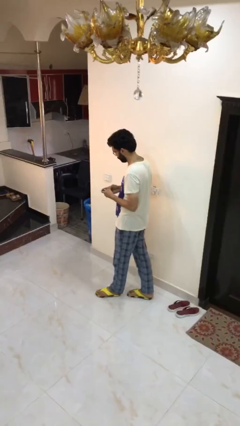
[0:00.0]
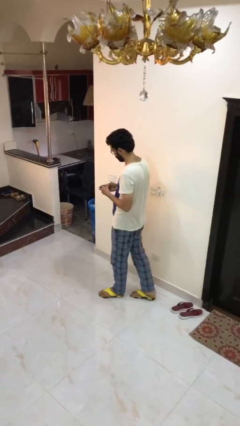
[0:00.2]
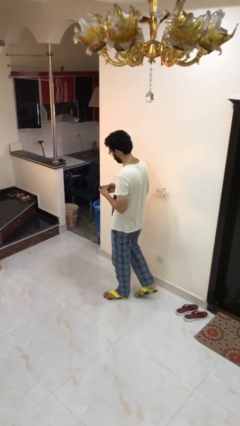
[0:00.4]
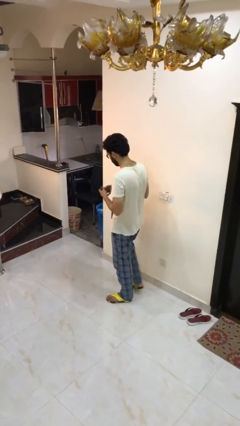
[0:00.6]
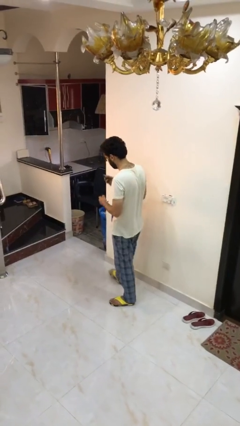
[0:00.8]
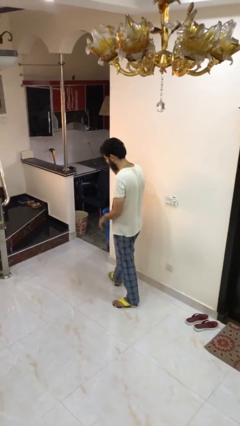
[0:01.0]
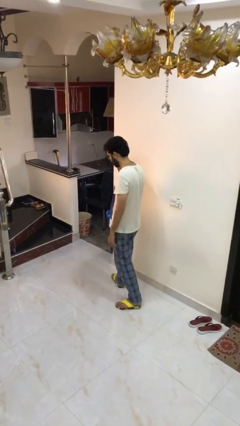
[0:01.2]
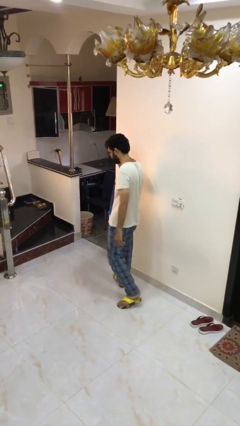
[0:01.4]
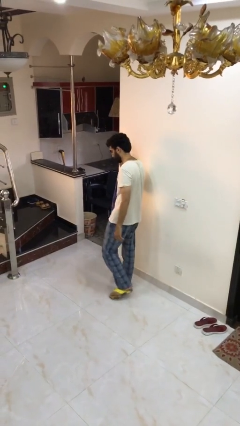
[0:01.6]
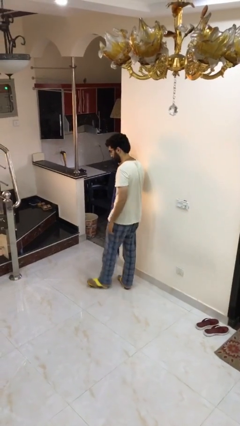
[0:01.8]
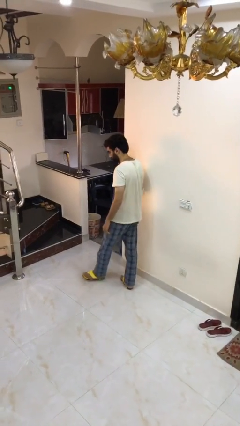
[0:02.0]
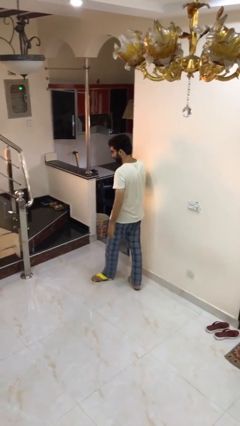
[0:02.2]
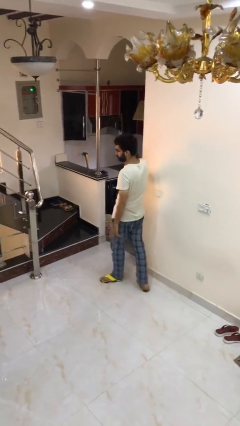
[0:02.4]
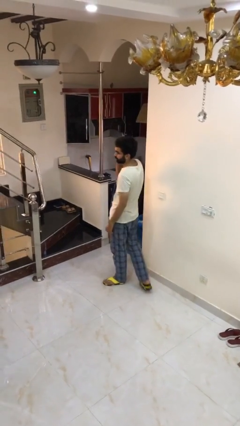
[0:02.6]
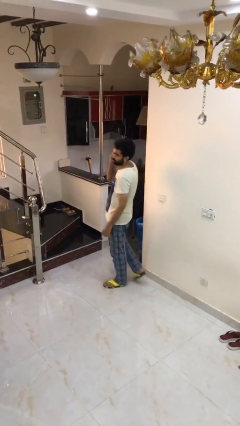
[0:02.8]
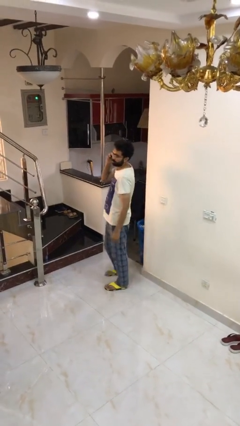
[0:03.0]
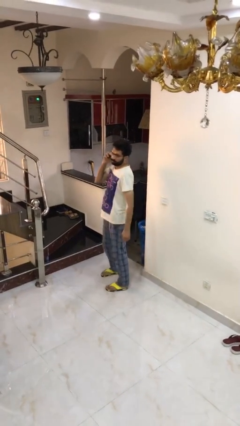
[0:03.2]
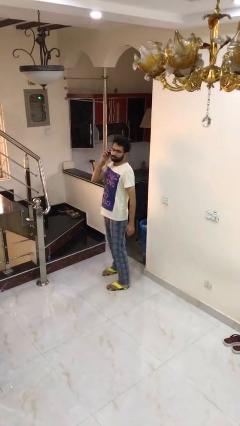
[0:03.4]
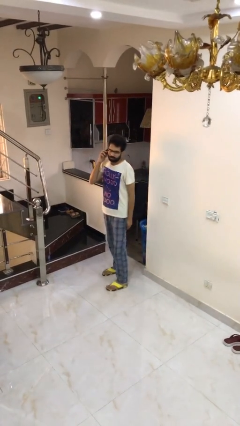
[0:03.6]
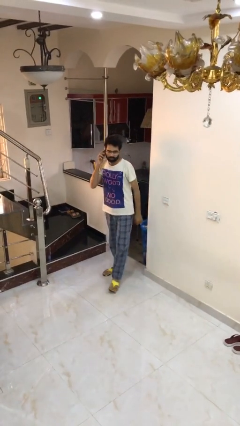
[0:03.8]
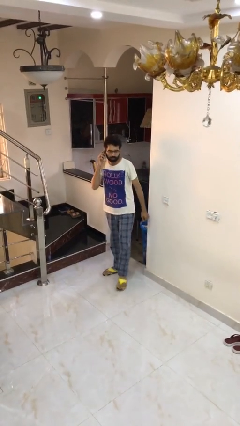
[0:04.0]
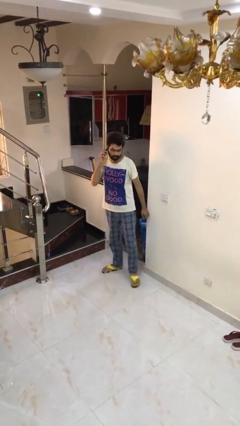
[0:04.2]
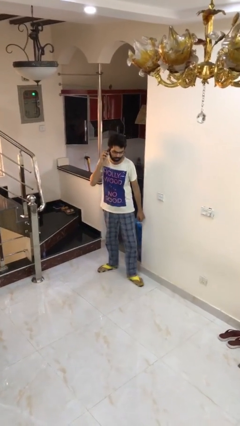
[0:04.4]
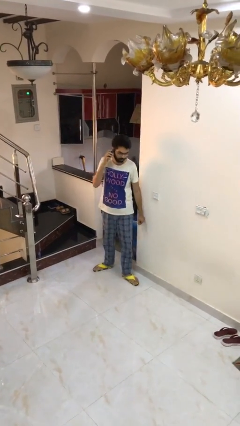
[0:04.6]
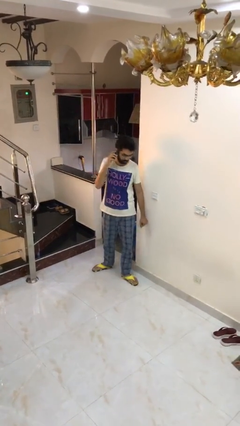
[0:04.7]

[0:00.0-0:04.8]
person talks on phone

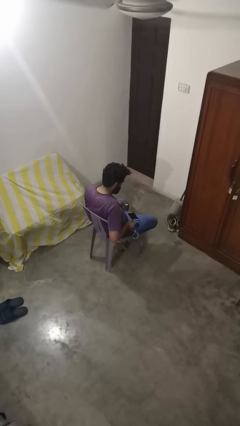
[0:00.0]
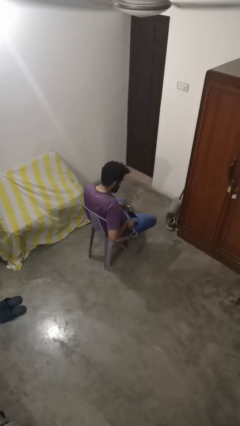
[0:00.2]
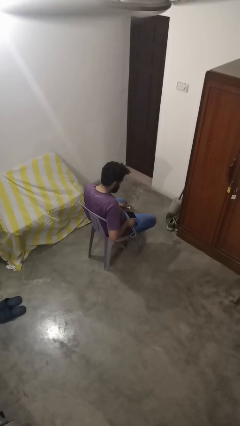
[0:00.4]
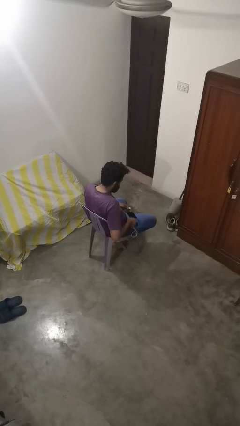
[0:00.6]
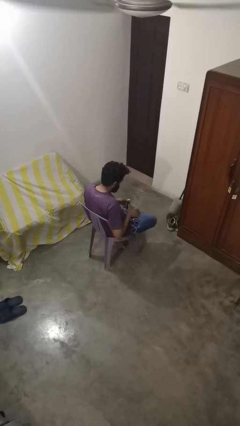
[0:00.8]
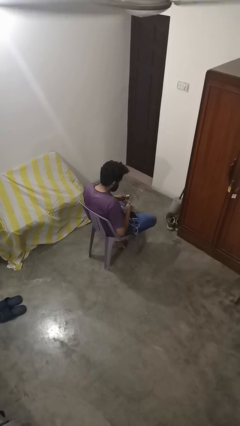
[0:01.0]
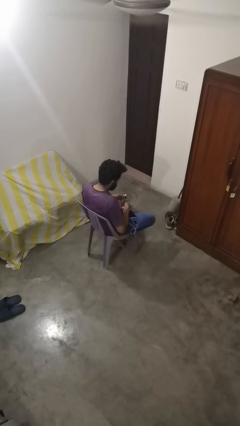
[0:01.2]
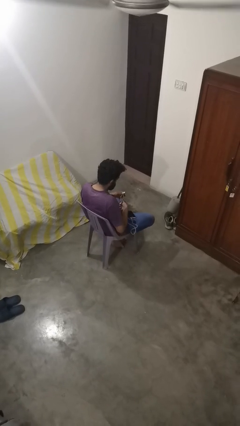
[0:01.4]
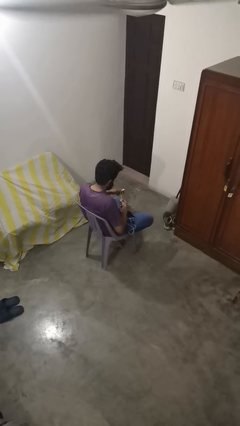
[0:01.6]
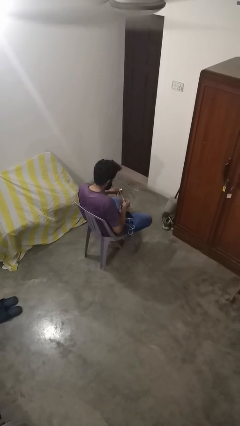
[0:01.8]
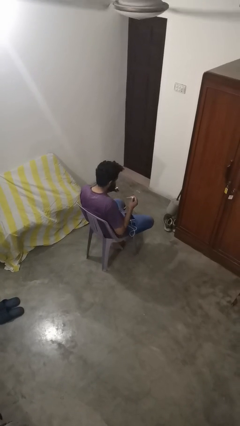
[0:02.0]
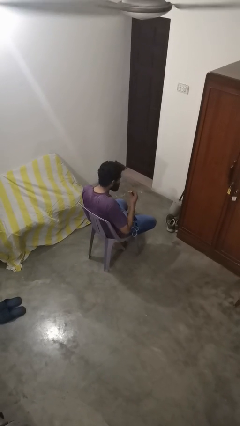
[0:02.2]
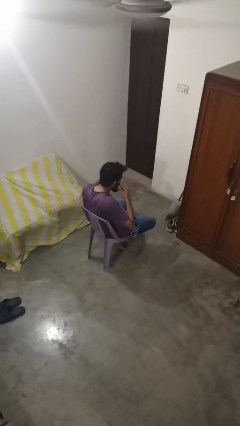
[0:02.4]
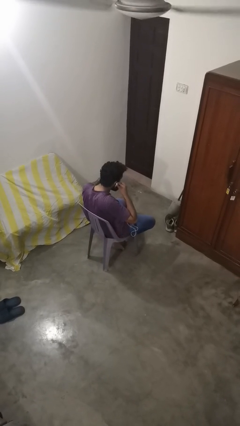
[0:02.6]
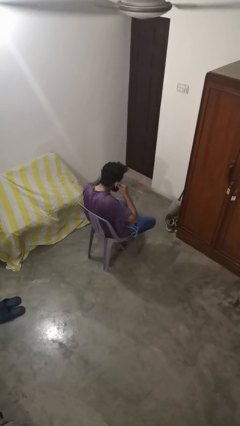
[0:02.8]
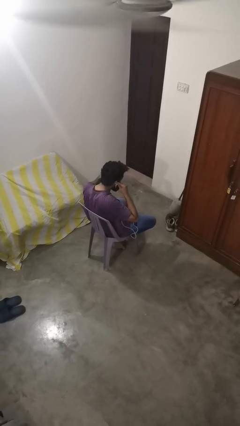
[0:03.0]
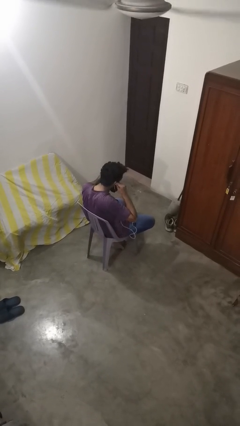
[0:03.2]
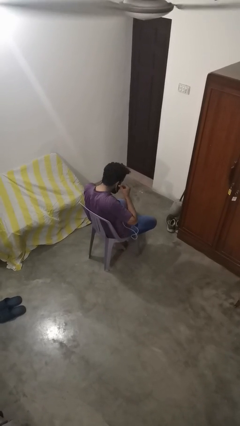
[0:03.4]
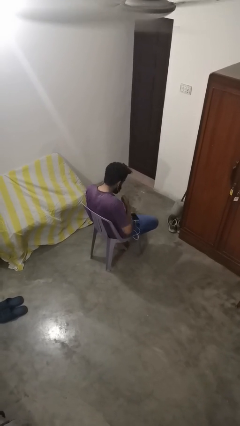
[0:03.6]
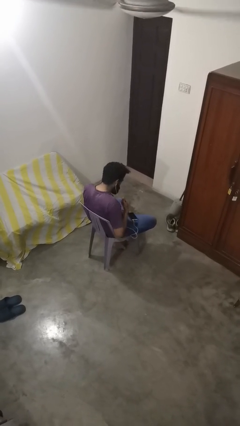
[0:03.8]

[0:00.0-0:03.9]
person puts on headphones

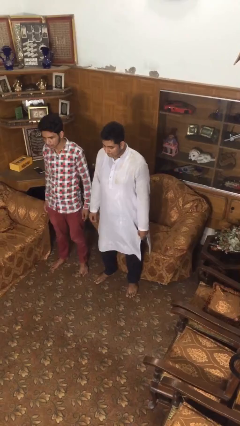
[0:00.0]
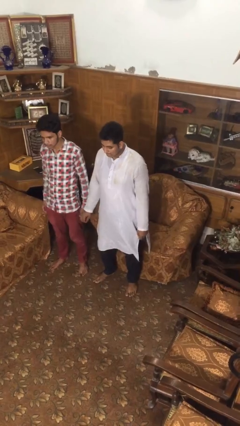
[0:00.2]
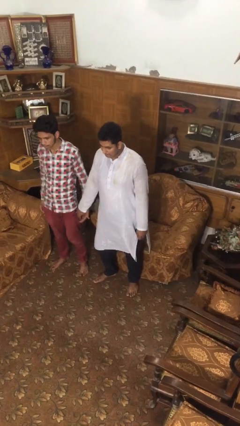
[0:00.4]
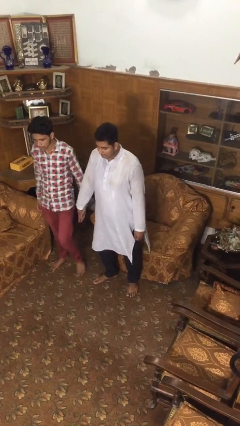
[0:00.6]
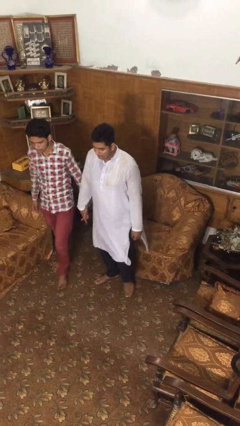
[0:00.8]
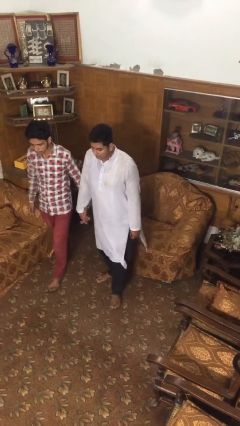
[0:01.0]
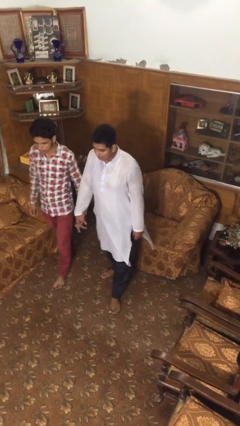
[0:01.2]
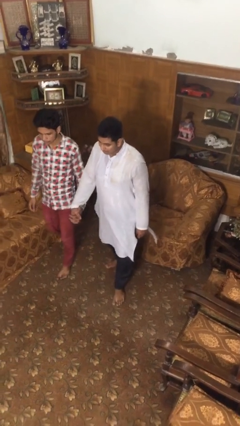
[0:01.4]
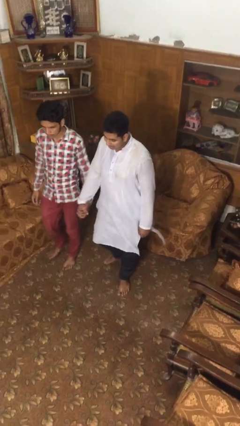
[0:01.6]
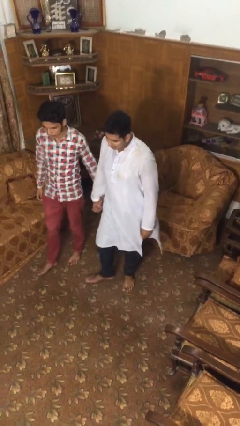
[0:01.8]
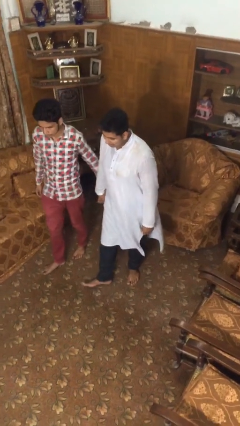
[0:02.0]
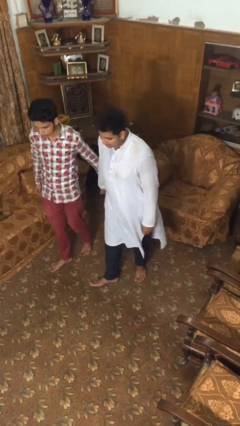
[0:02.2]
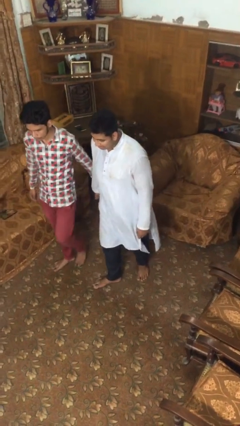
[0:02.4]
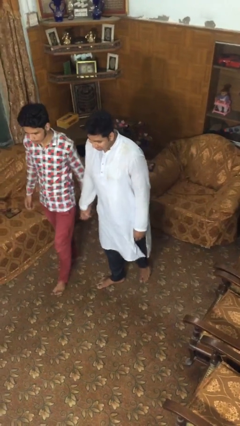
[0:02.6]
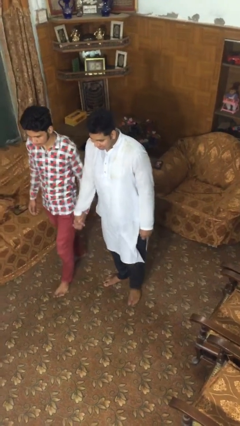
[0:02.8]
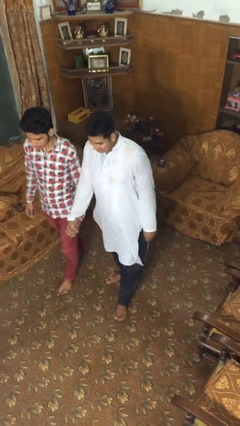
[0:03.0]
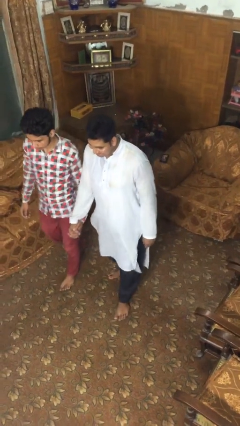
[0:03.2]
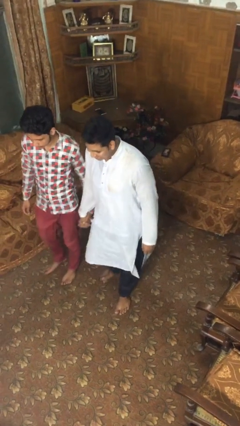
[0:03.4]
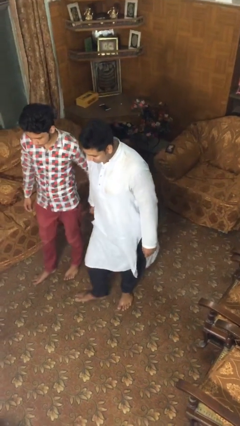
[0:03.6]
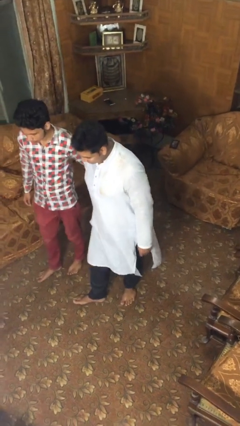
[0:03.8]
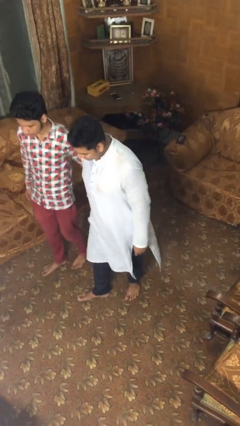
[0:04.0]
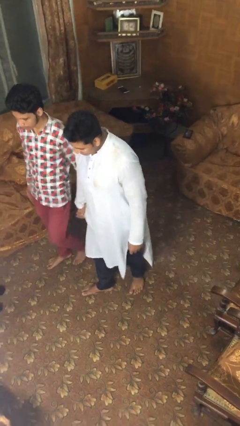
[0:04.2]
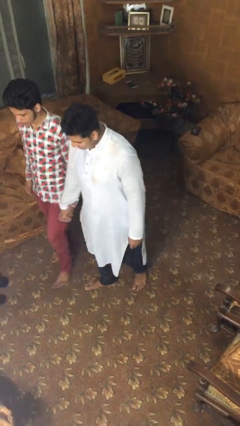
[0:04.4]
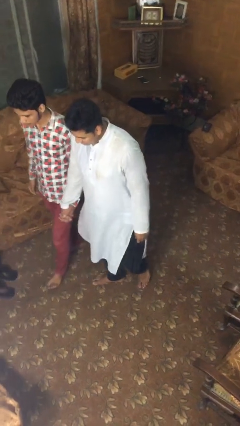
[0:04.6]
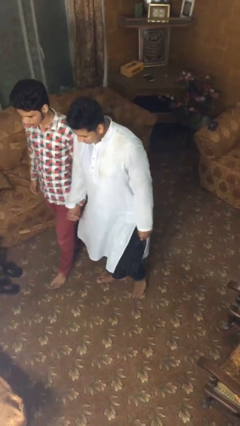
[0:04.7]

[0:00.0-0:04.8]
person holds hand

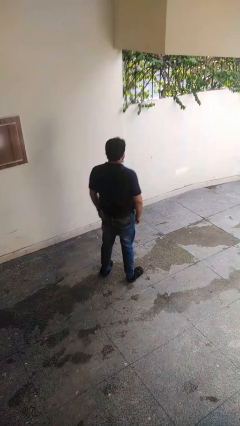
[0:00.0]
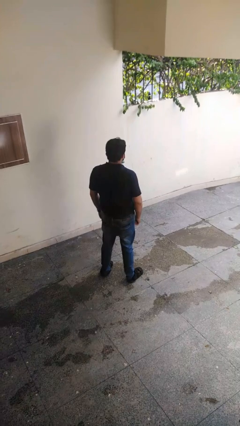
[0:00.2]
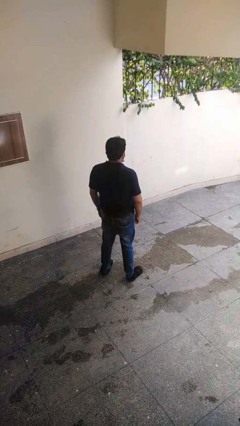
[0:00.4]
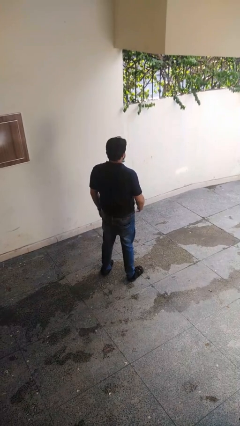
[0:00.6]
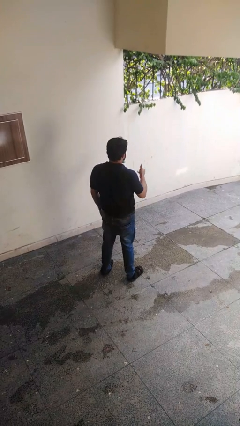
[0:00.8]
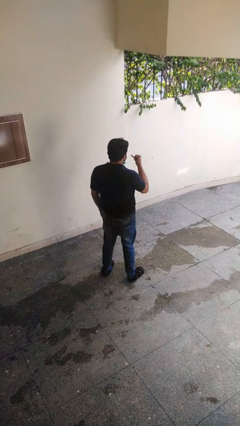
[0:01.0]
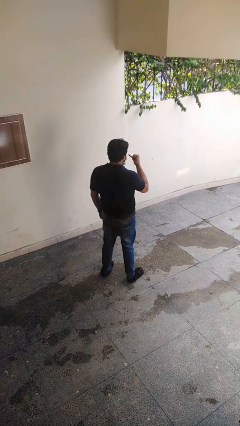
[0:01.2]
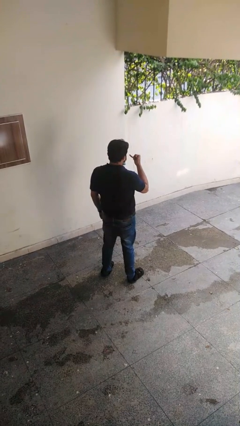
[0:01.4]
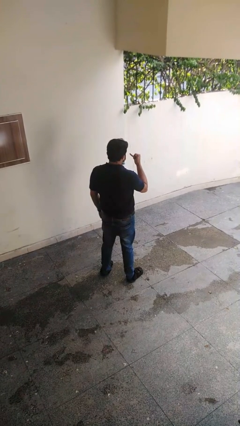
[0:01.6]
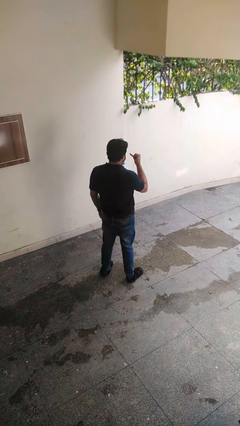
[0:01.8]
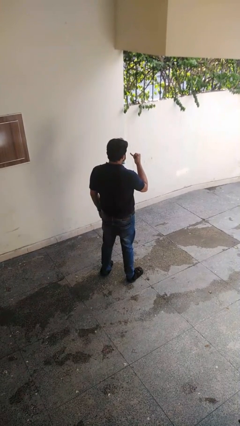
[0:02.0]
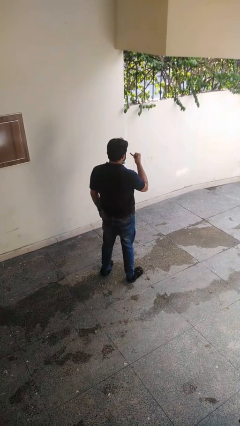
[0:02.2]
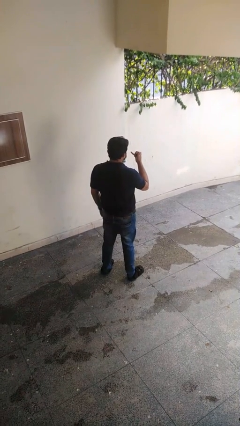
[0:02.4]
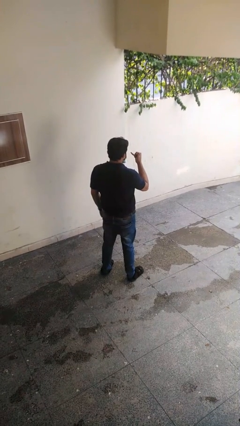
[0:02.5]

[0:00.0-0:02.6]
person gestures hang loose

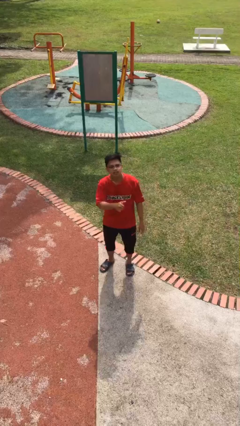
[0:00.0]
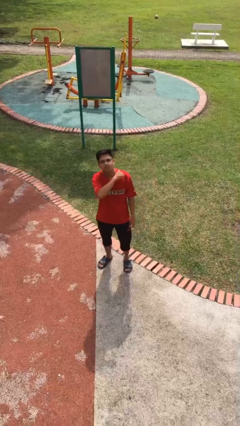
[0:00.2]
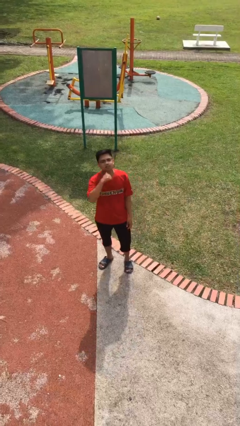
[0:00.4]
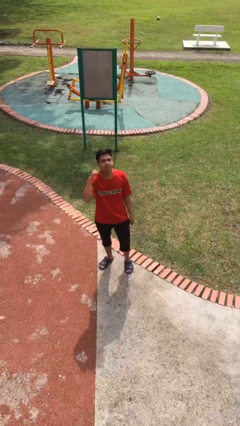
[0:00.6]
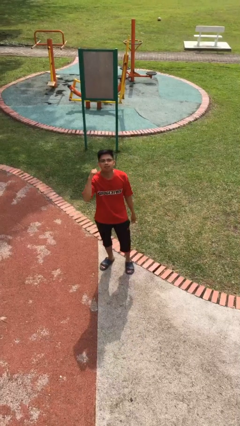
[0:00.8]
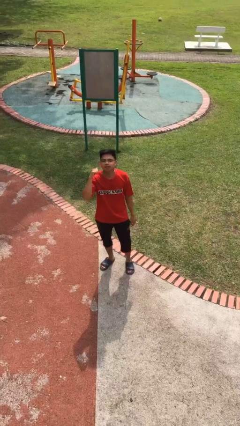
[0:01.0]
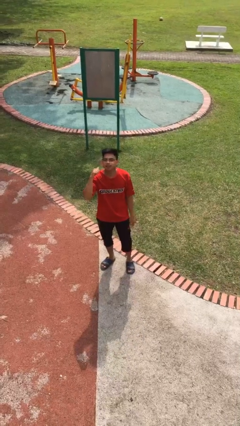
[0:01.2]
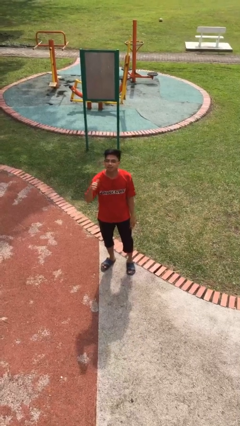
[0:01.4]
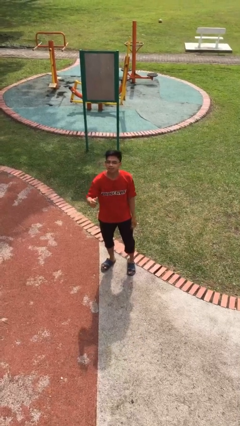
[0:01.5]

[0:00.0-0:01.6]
person gestures cut
